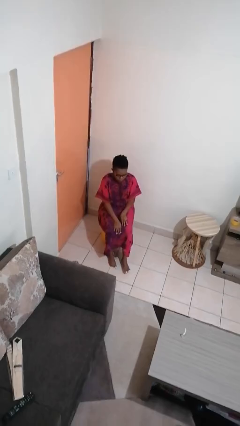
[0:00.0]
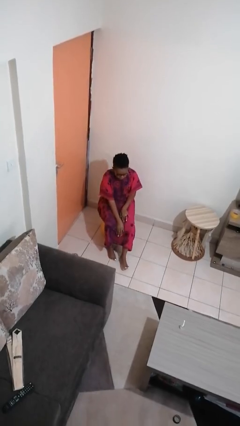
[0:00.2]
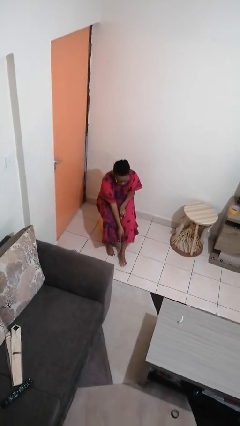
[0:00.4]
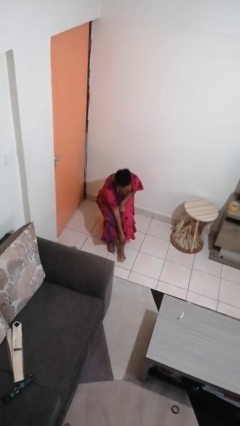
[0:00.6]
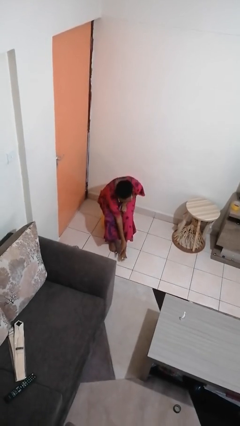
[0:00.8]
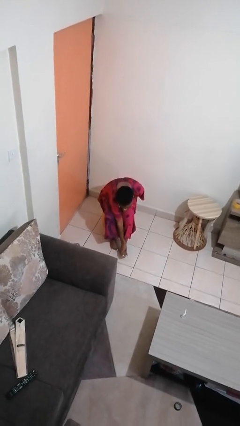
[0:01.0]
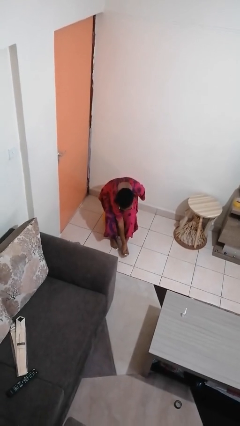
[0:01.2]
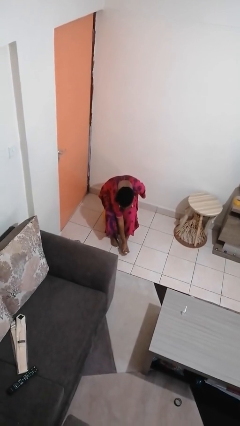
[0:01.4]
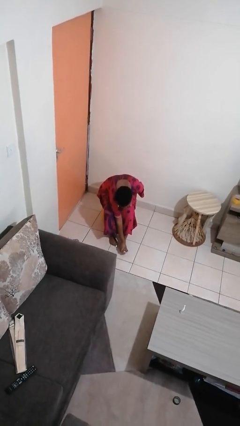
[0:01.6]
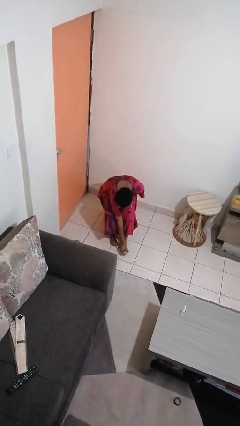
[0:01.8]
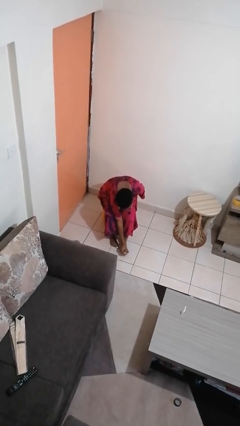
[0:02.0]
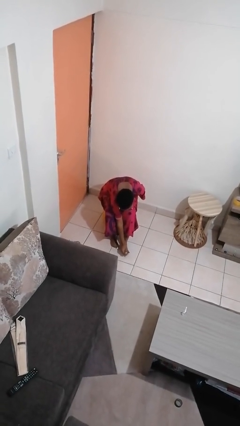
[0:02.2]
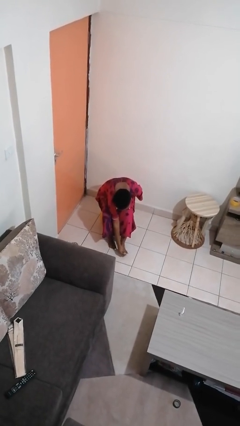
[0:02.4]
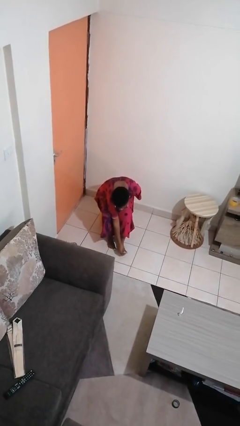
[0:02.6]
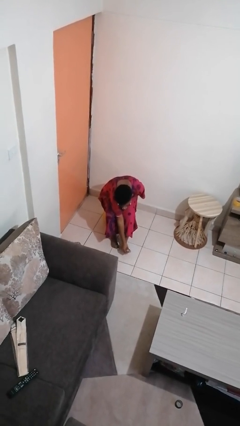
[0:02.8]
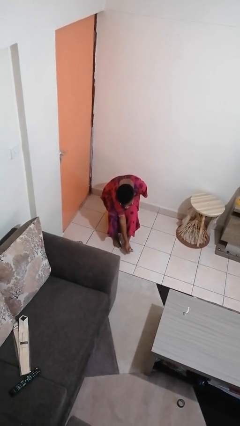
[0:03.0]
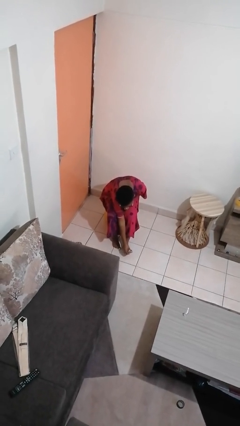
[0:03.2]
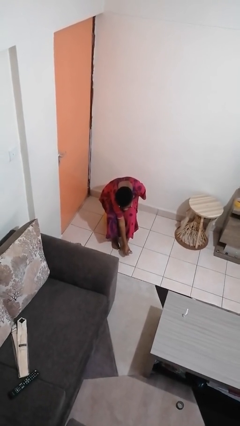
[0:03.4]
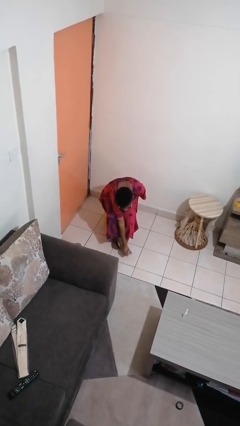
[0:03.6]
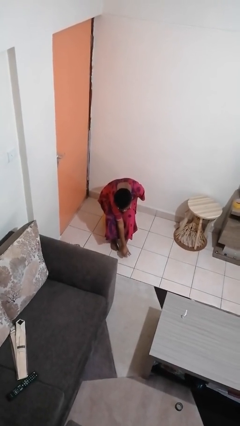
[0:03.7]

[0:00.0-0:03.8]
person rubs foot

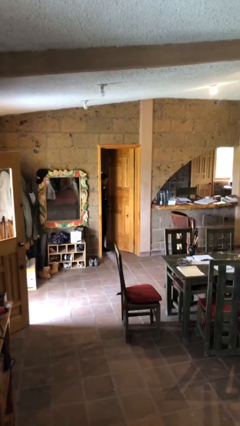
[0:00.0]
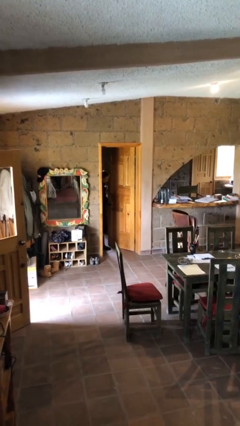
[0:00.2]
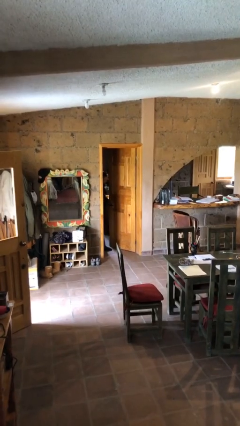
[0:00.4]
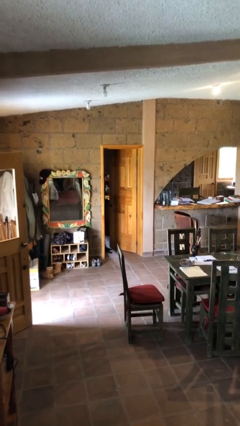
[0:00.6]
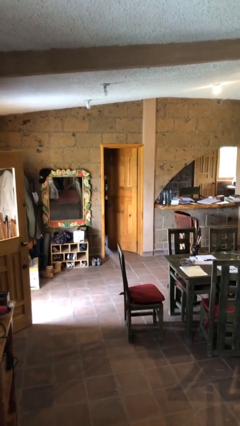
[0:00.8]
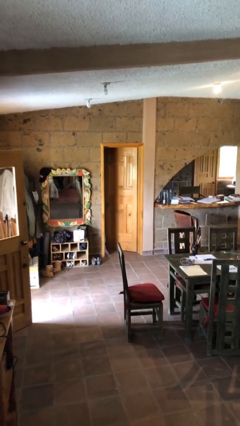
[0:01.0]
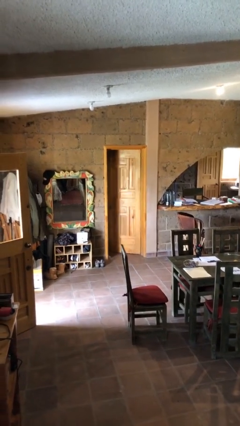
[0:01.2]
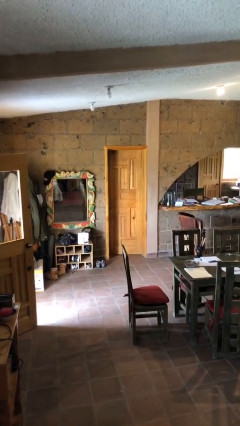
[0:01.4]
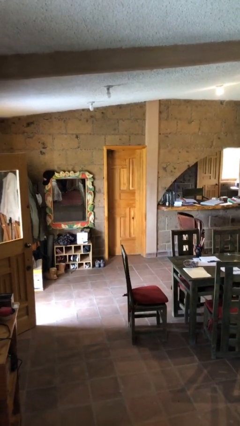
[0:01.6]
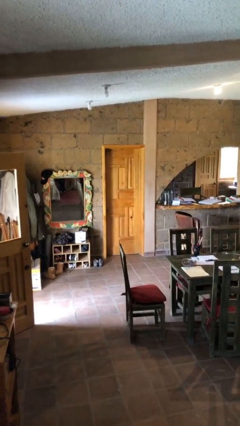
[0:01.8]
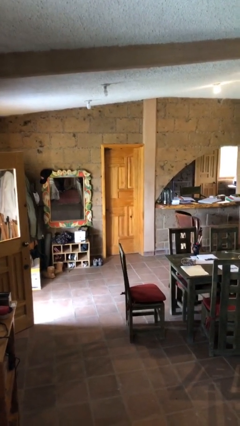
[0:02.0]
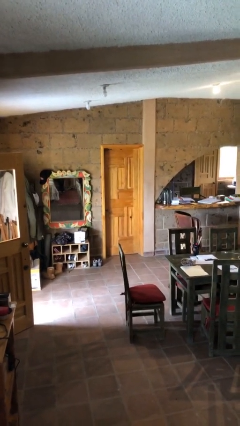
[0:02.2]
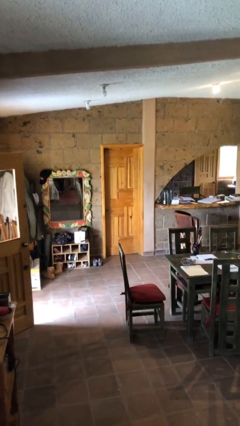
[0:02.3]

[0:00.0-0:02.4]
person closes facility door

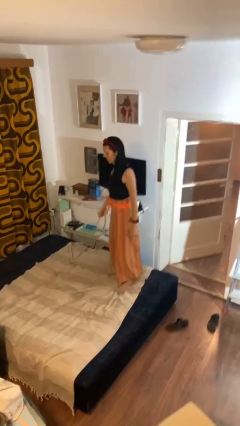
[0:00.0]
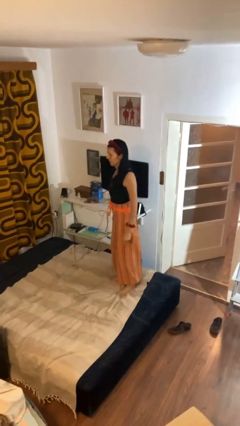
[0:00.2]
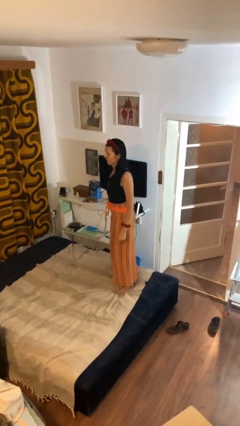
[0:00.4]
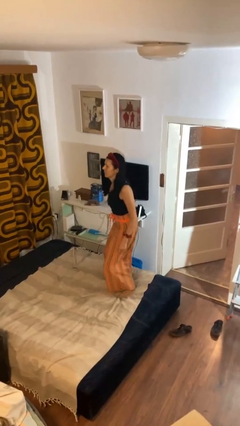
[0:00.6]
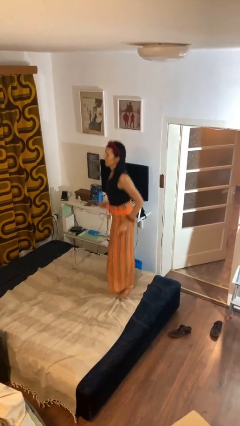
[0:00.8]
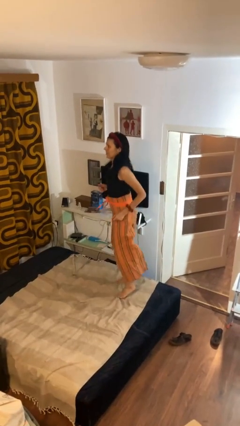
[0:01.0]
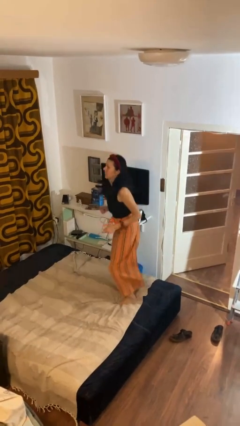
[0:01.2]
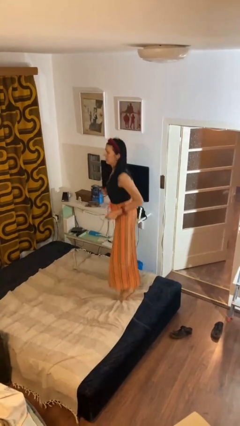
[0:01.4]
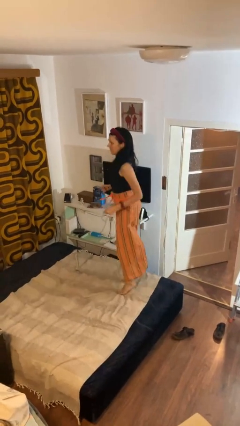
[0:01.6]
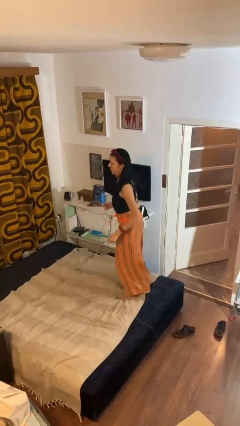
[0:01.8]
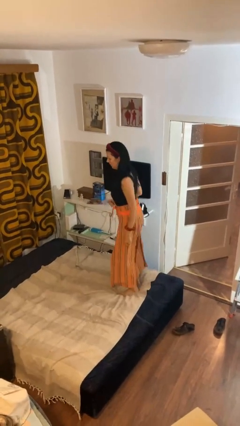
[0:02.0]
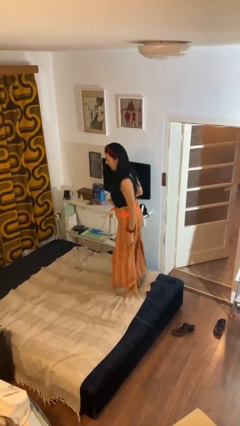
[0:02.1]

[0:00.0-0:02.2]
person jumps on bed

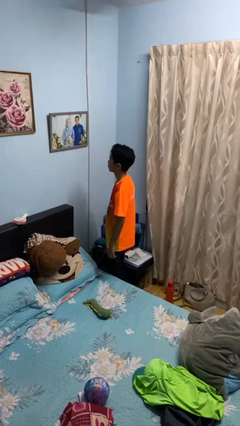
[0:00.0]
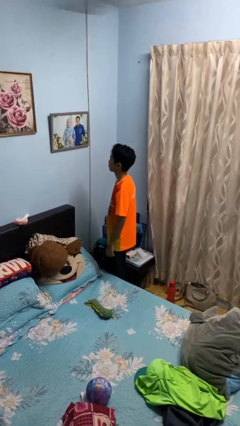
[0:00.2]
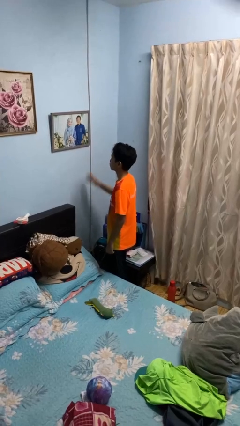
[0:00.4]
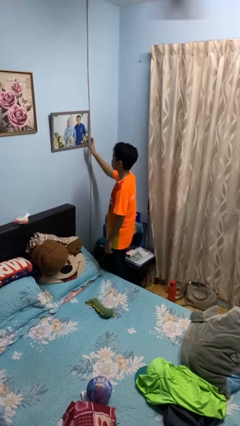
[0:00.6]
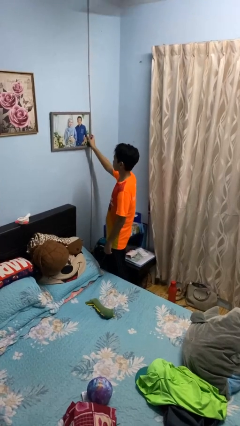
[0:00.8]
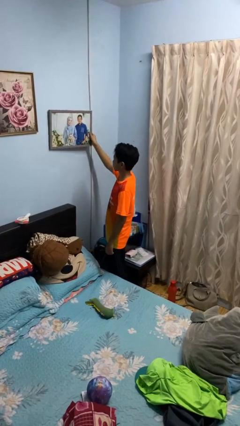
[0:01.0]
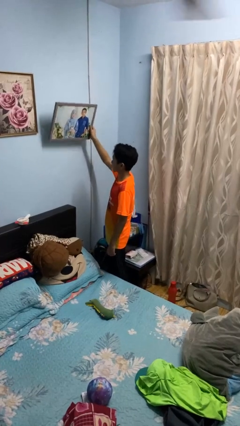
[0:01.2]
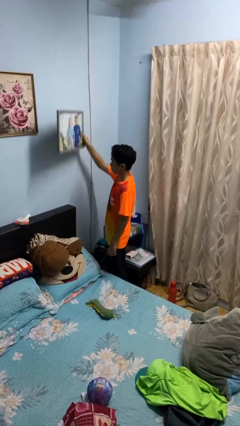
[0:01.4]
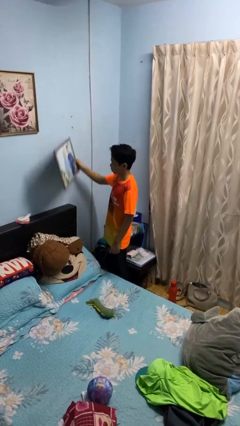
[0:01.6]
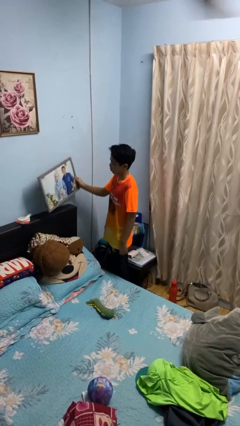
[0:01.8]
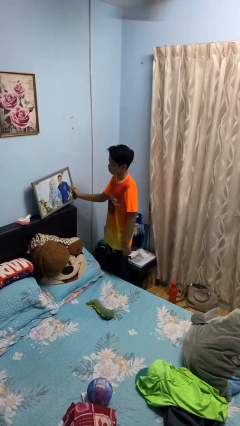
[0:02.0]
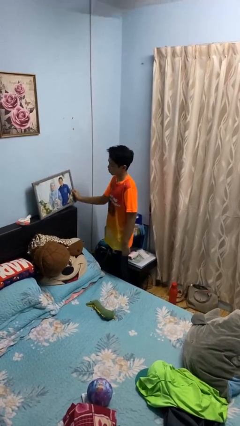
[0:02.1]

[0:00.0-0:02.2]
person takes down picture frame

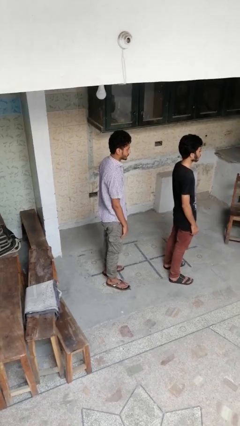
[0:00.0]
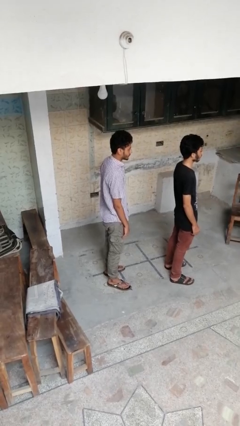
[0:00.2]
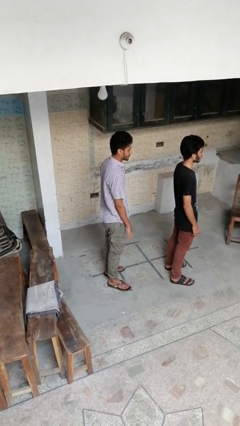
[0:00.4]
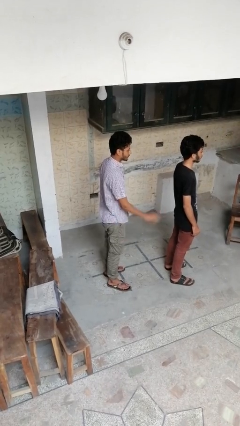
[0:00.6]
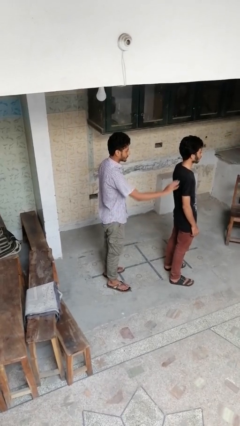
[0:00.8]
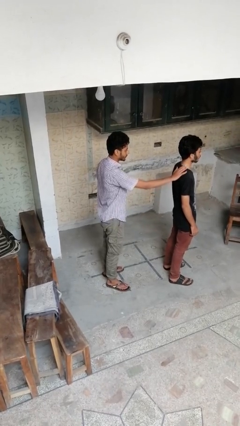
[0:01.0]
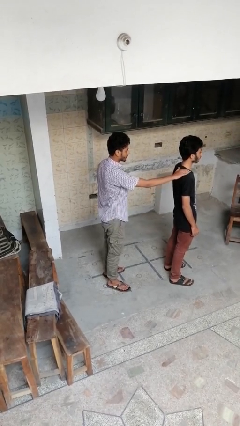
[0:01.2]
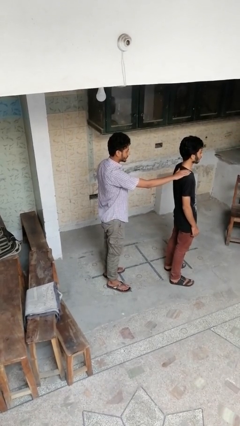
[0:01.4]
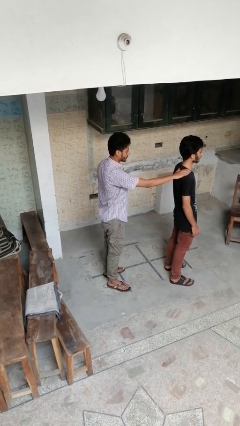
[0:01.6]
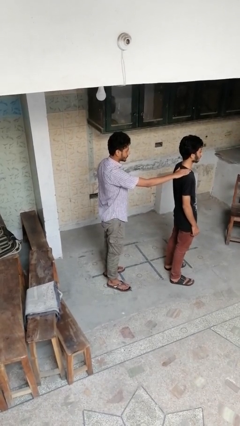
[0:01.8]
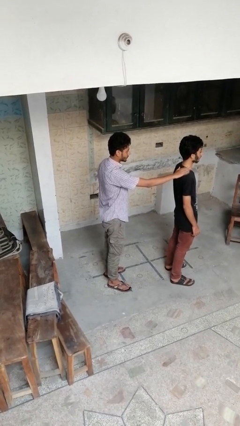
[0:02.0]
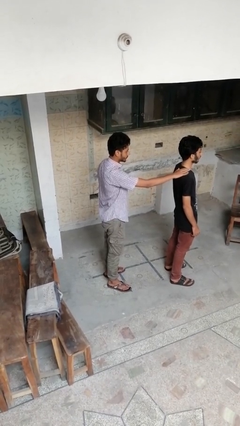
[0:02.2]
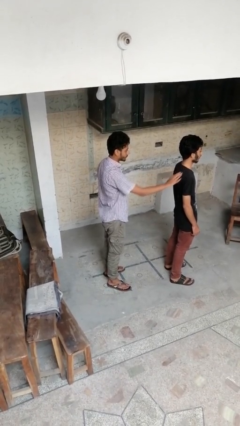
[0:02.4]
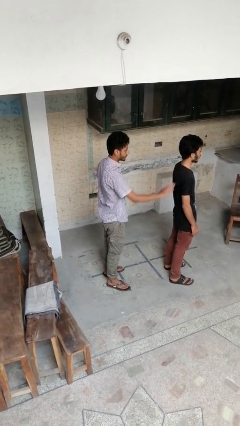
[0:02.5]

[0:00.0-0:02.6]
person touches back of person

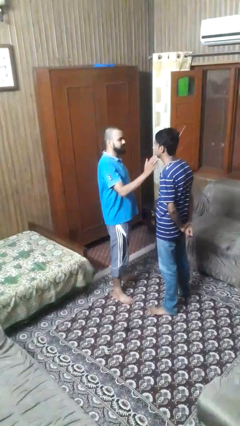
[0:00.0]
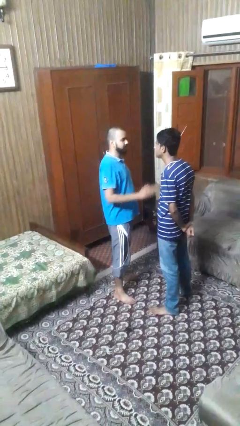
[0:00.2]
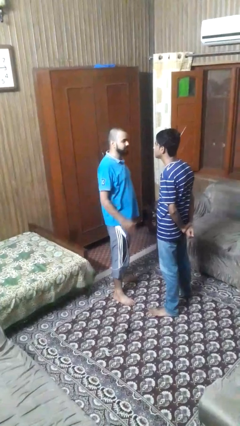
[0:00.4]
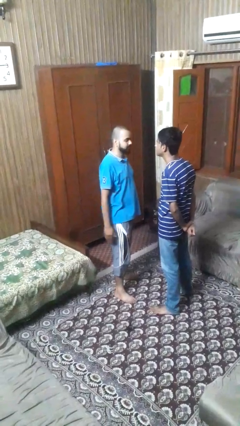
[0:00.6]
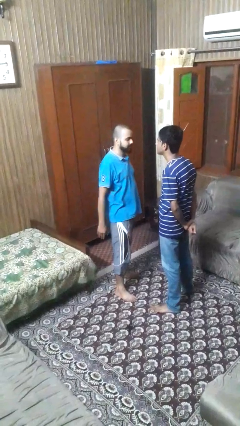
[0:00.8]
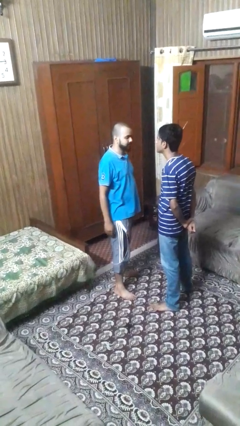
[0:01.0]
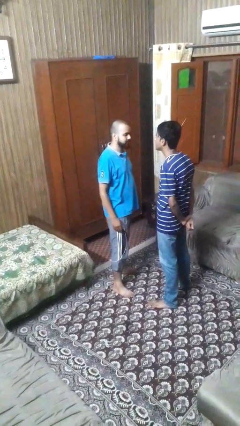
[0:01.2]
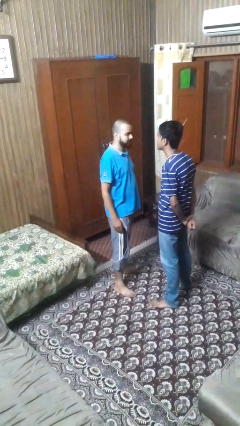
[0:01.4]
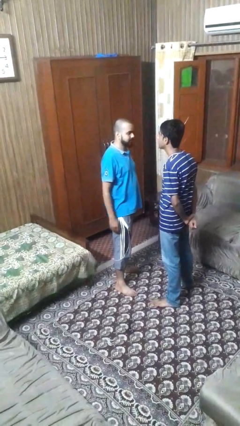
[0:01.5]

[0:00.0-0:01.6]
person touches face of person

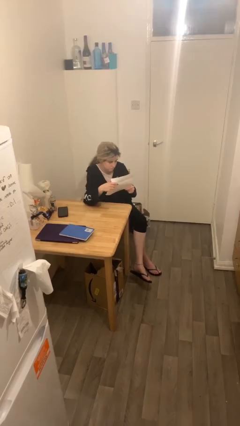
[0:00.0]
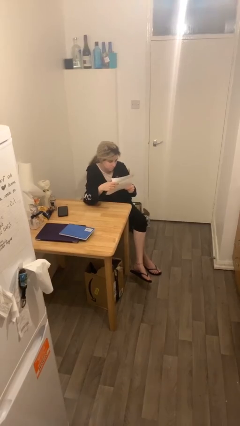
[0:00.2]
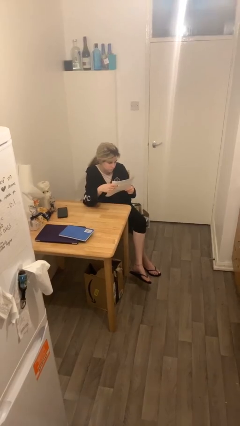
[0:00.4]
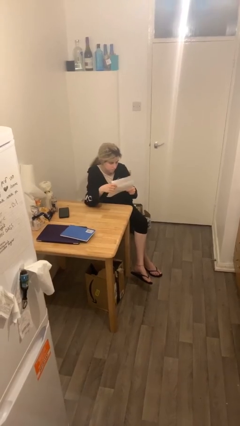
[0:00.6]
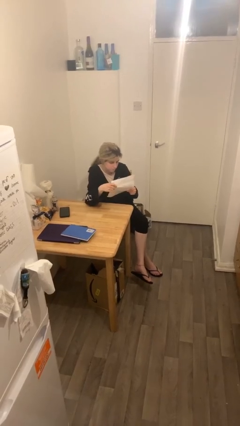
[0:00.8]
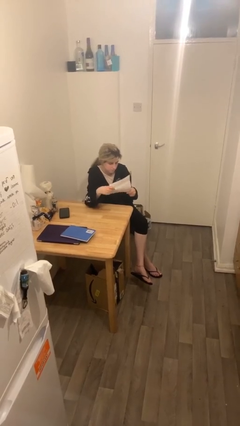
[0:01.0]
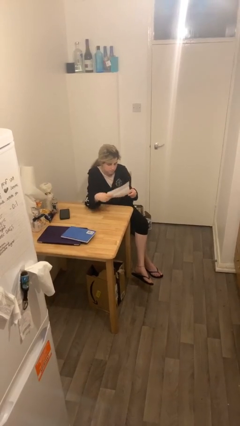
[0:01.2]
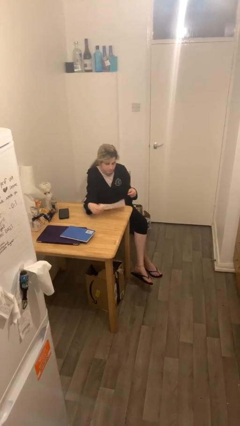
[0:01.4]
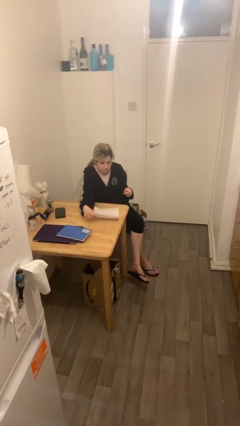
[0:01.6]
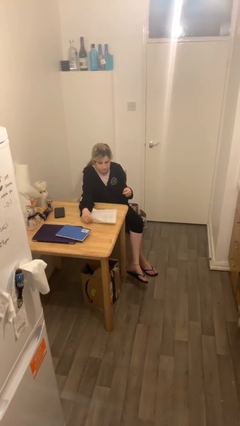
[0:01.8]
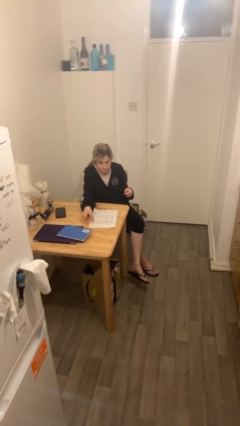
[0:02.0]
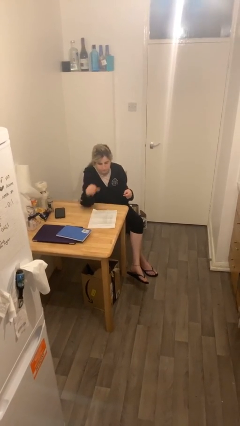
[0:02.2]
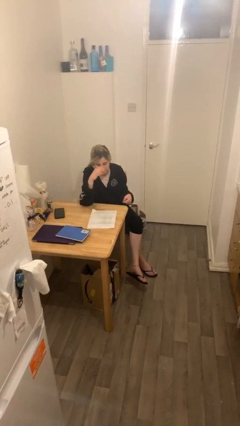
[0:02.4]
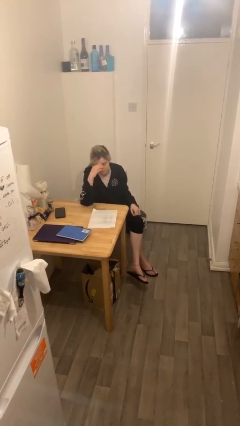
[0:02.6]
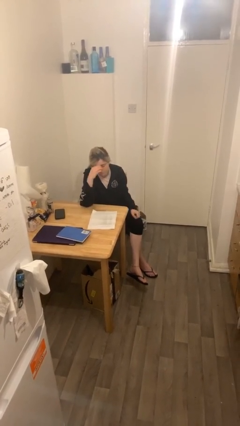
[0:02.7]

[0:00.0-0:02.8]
person puts down object on table
